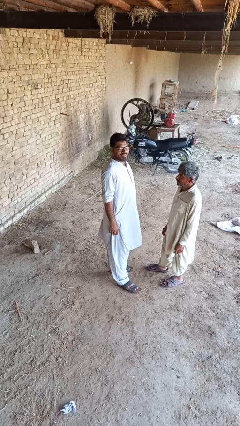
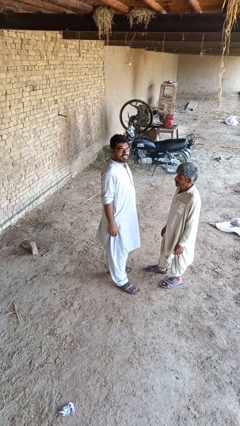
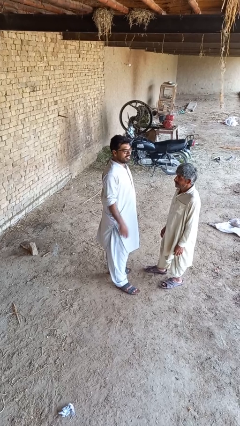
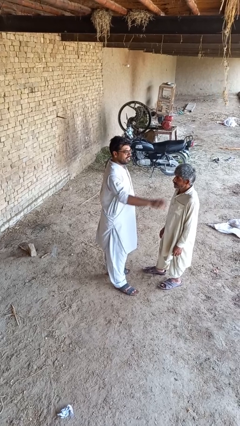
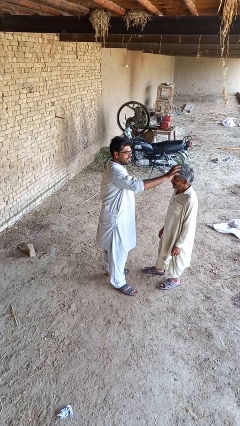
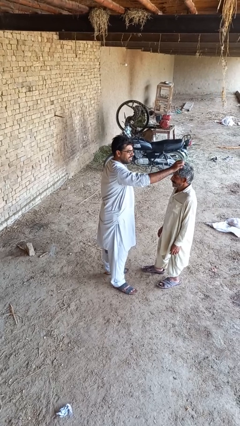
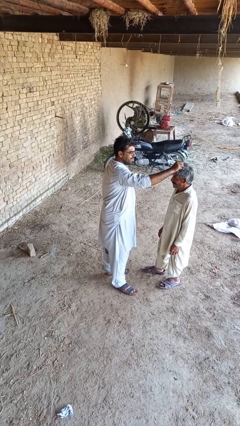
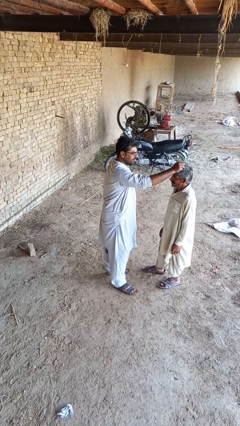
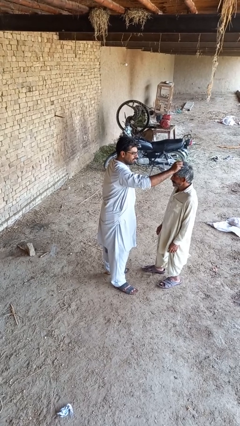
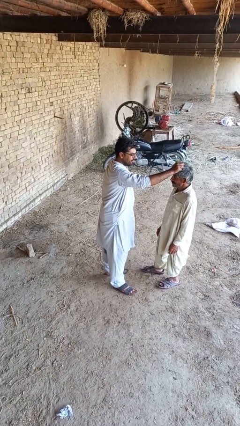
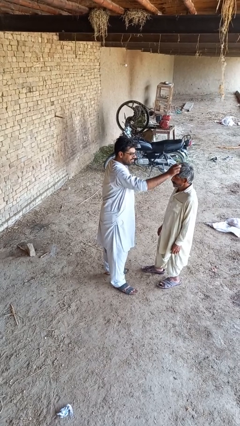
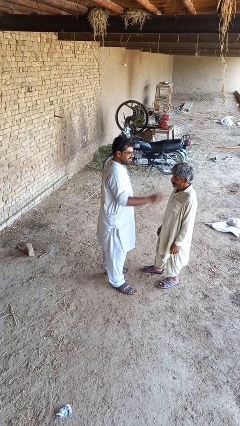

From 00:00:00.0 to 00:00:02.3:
person grabs person by hair

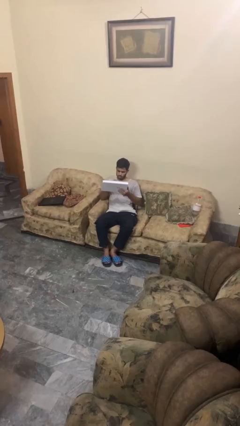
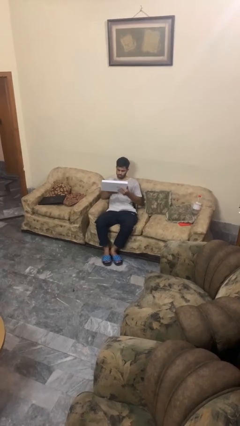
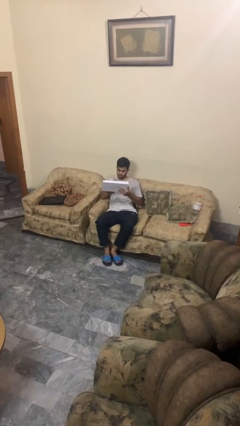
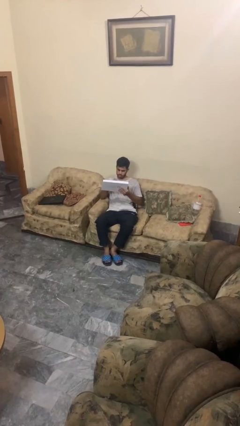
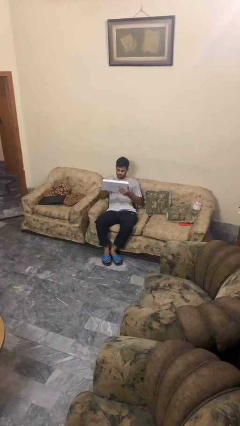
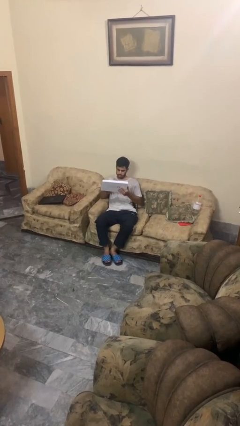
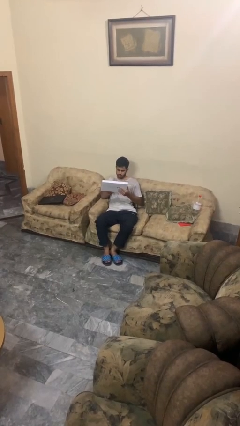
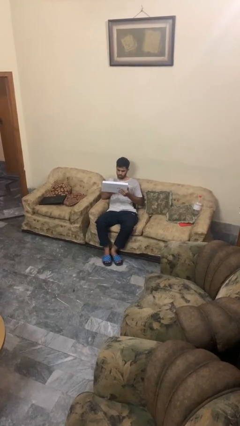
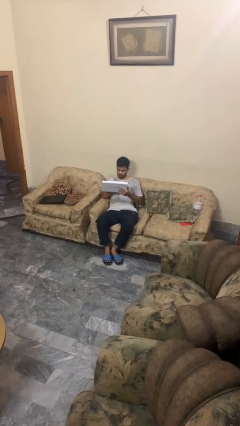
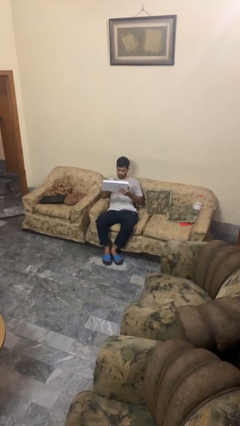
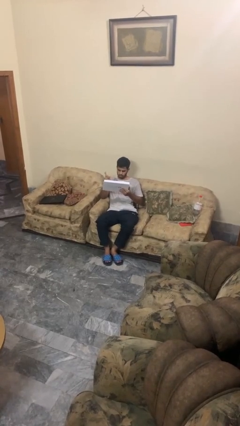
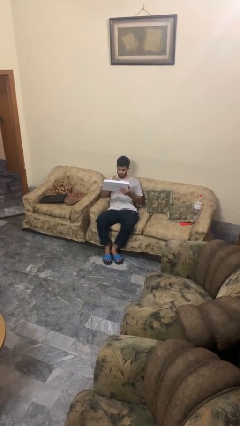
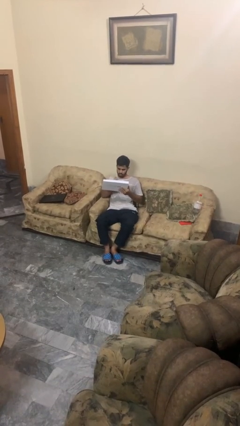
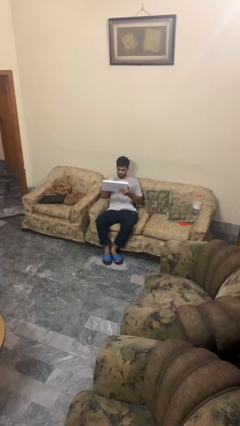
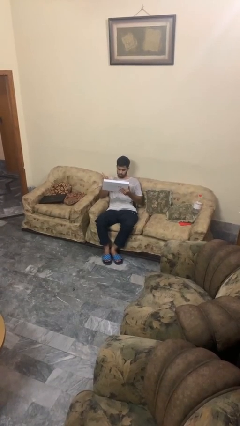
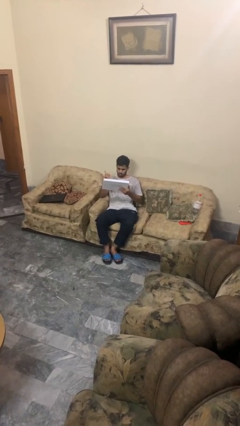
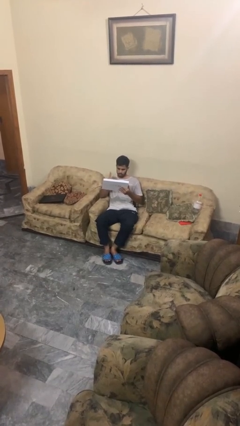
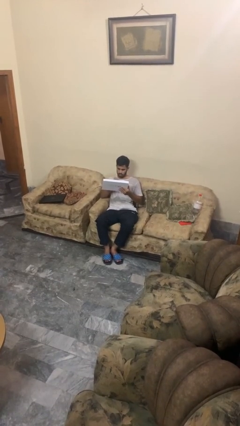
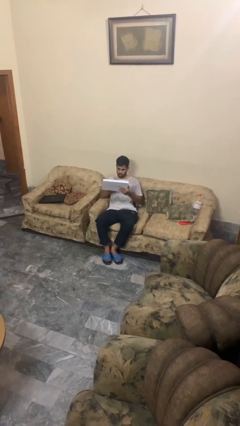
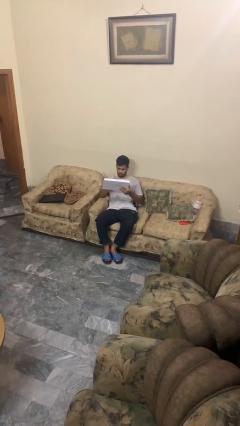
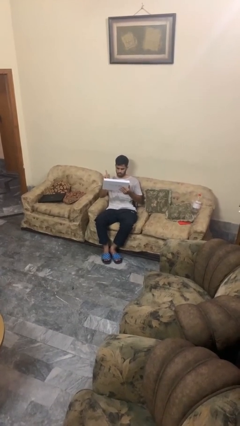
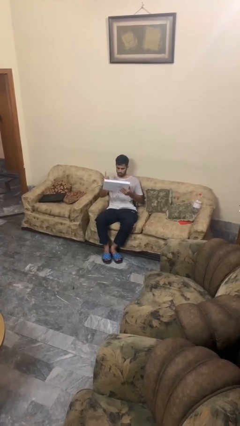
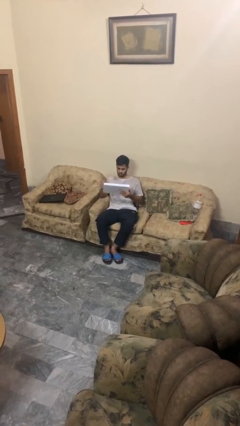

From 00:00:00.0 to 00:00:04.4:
person interacts with tablet

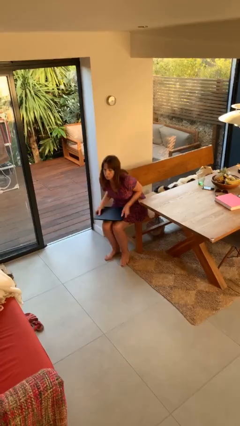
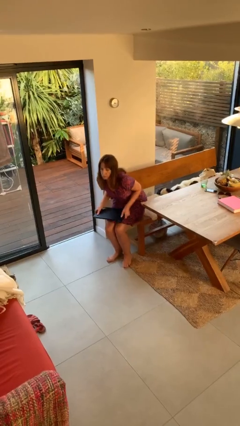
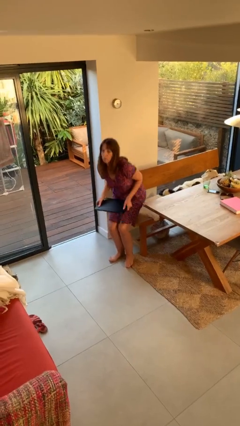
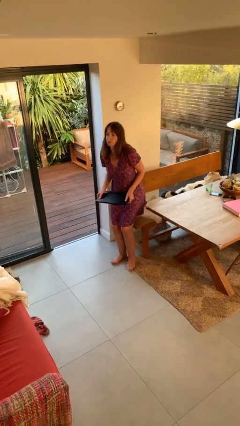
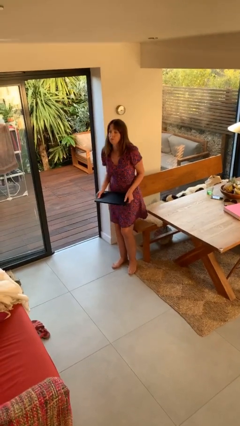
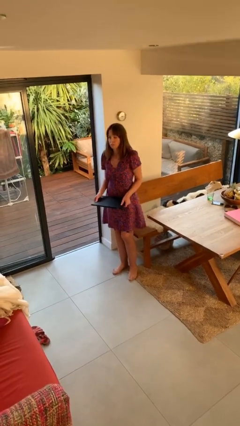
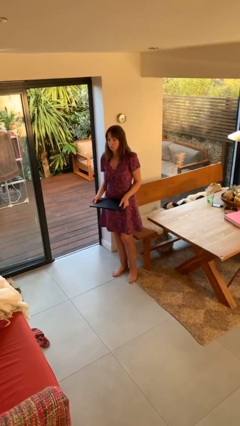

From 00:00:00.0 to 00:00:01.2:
person stands up

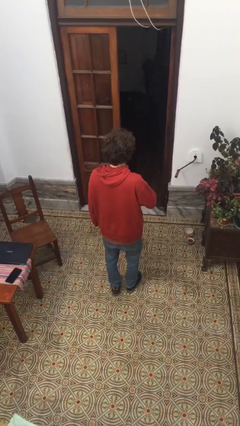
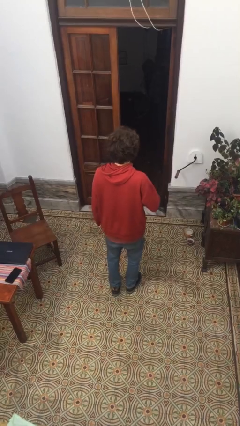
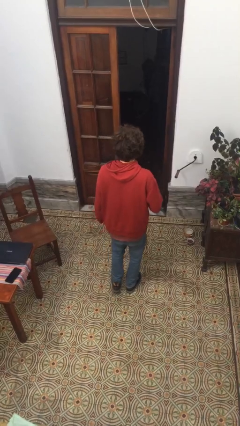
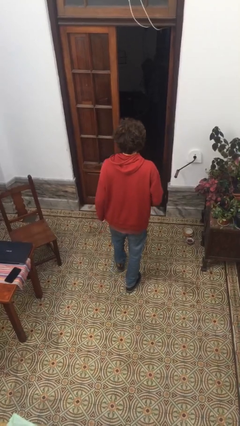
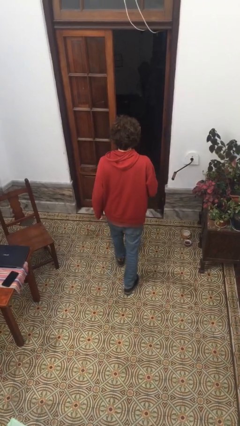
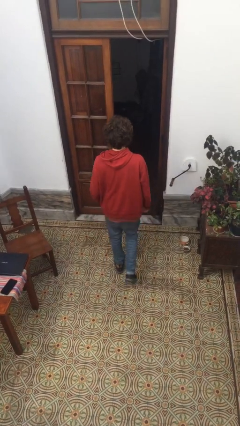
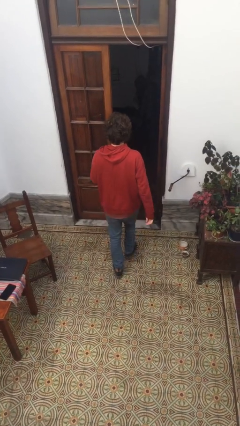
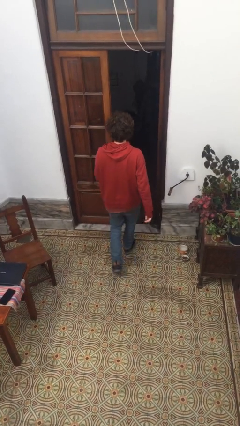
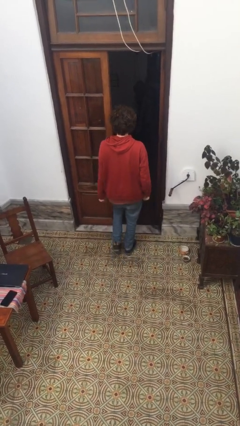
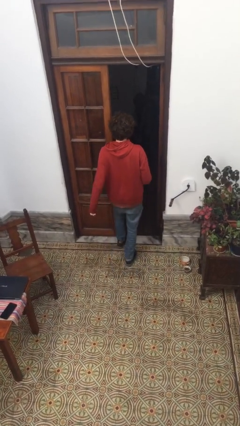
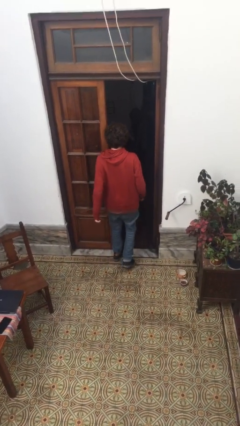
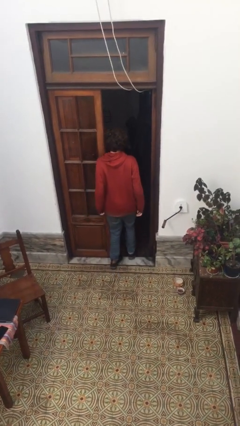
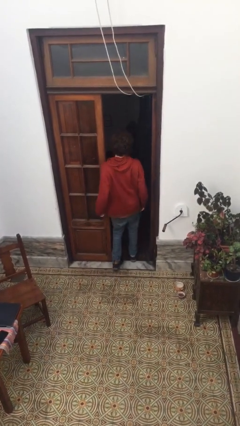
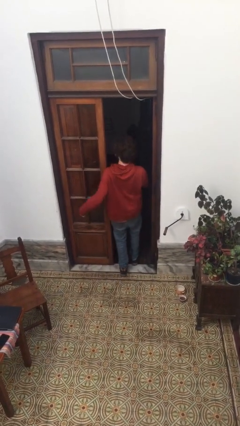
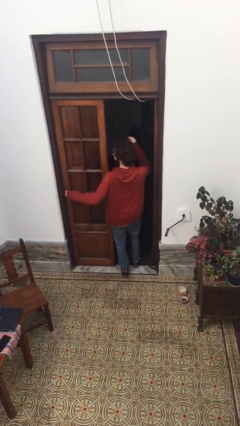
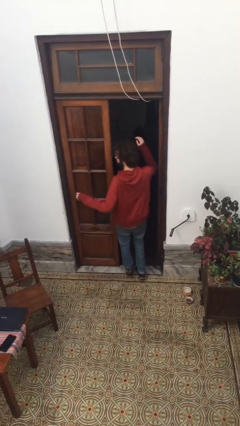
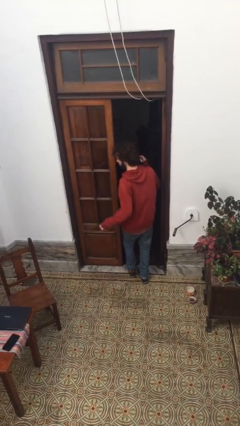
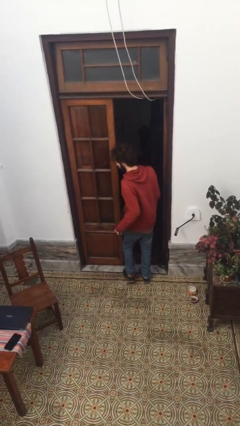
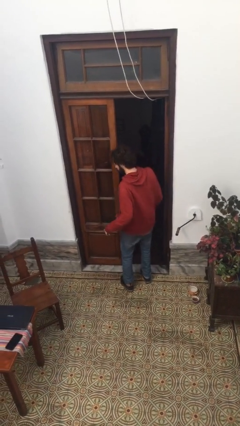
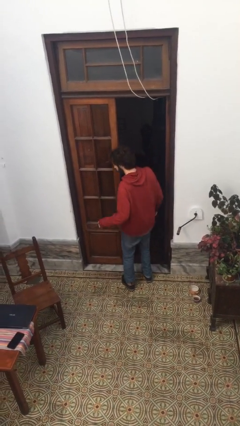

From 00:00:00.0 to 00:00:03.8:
person bumps into wall

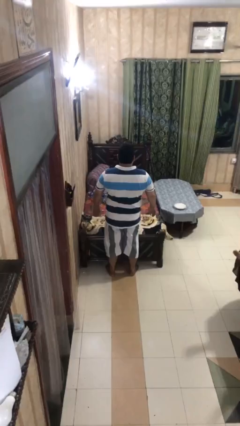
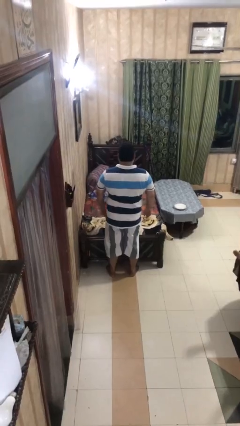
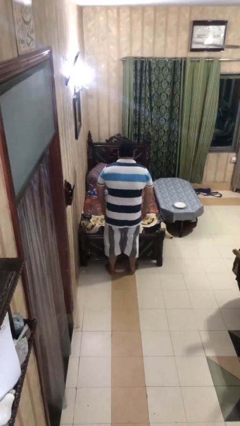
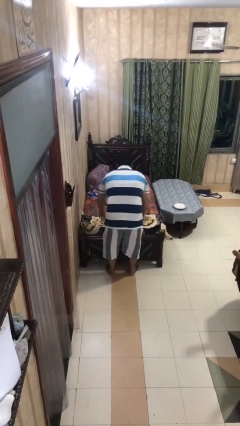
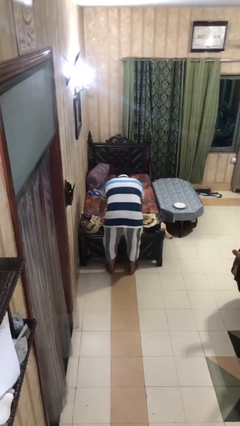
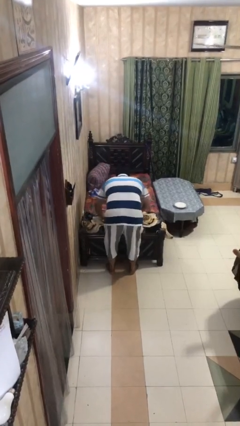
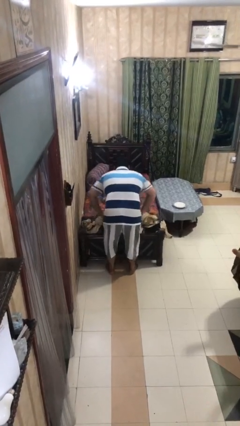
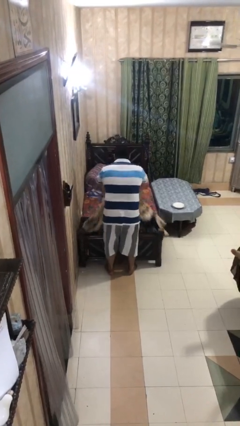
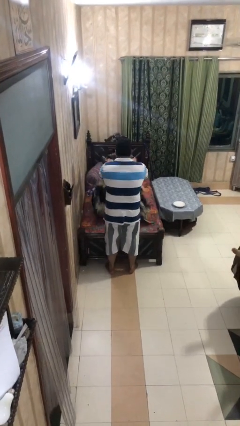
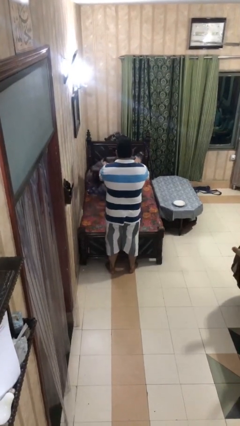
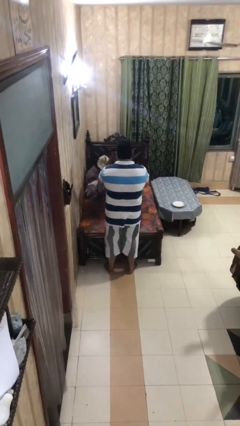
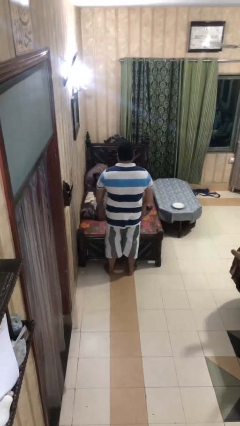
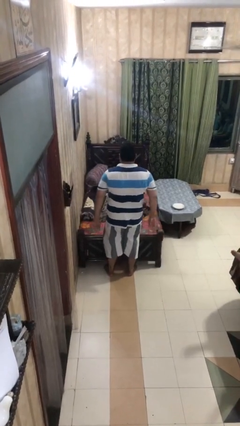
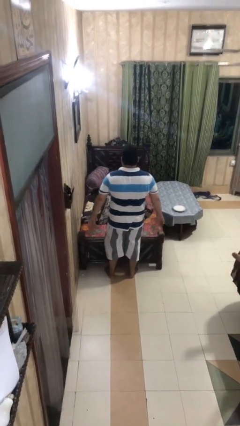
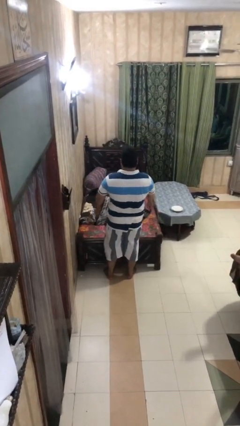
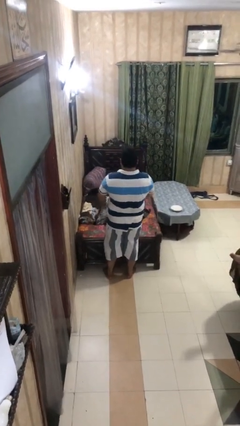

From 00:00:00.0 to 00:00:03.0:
person unfolds blanket

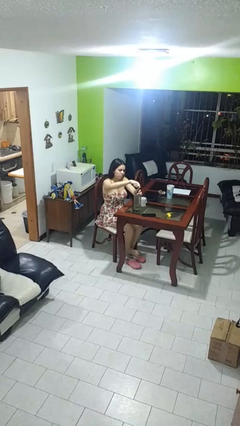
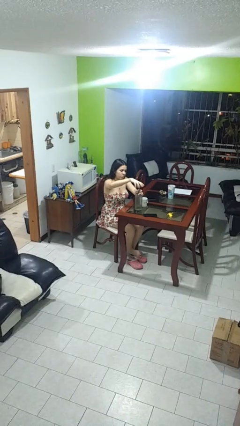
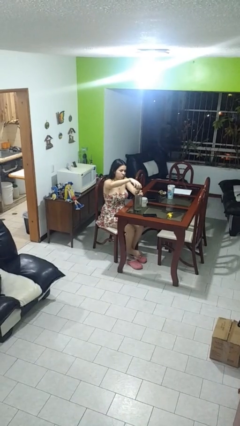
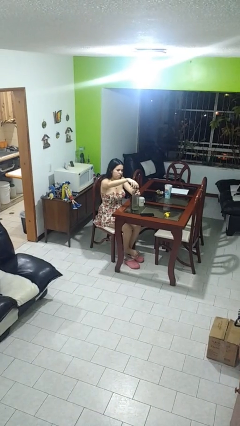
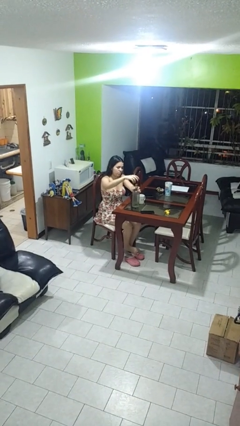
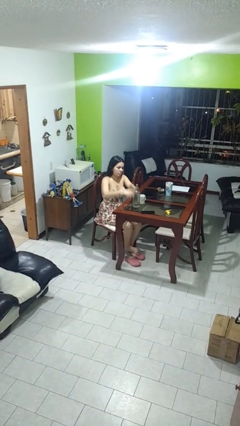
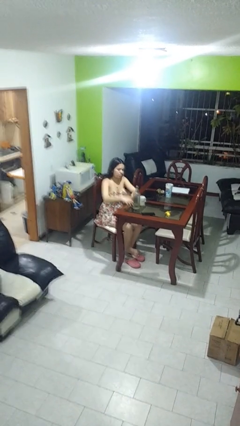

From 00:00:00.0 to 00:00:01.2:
person unscrews lid from bottle

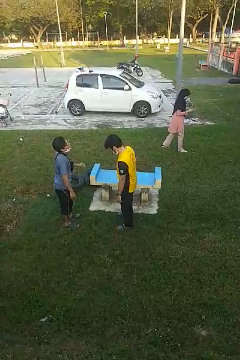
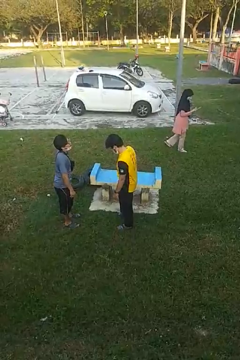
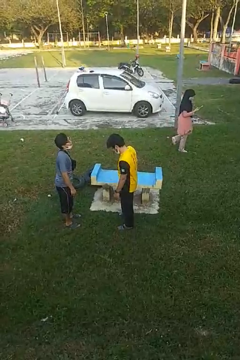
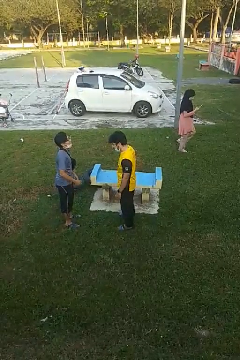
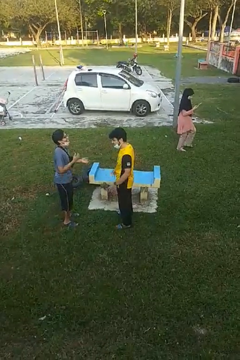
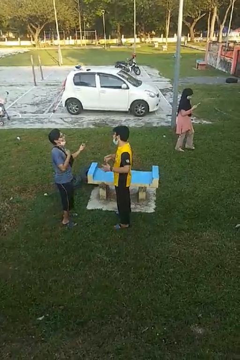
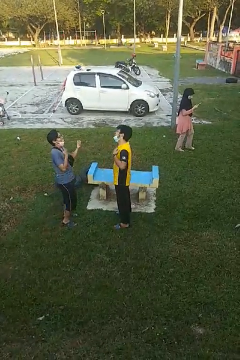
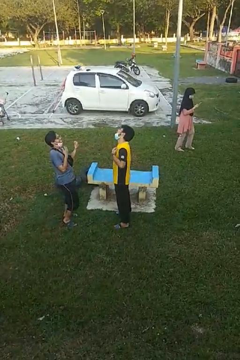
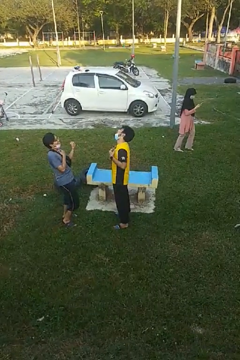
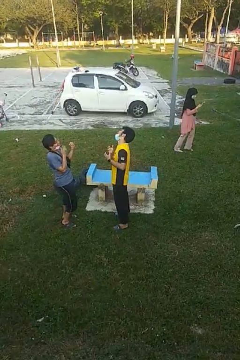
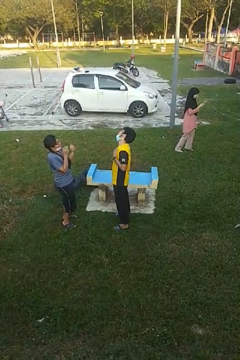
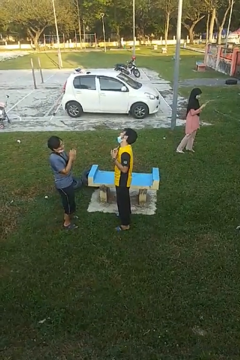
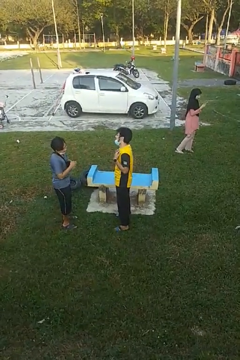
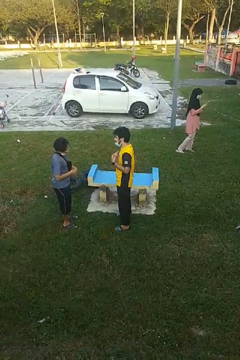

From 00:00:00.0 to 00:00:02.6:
person laughs with person
